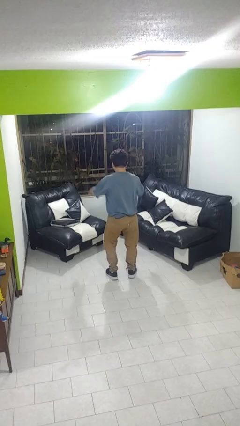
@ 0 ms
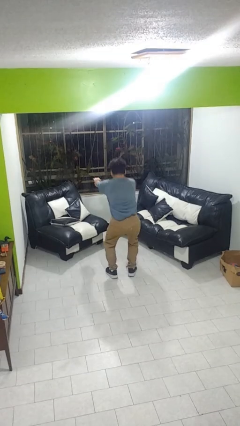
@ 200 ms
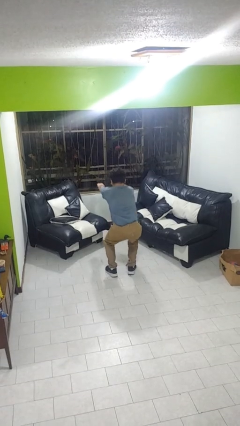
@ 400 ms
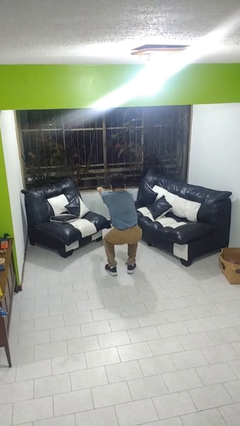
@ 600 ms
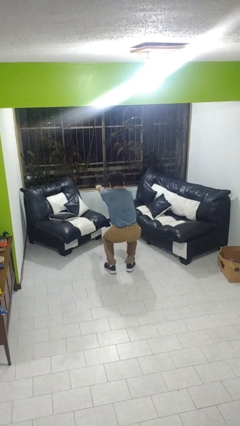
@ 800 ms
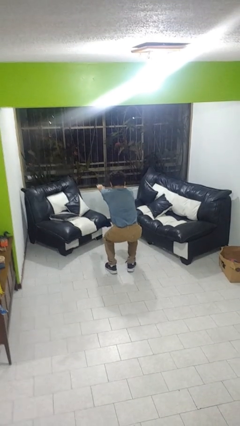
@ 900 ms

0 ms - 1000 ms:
person squats

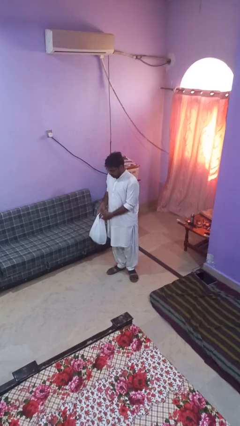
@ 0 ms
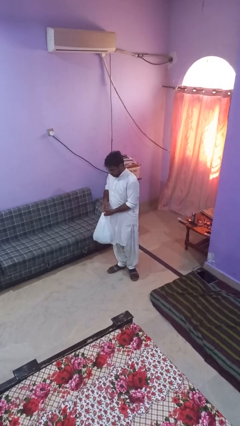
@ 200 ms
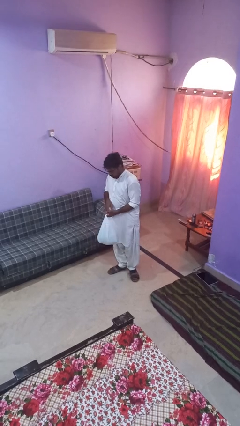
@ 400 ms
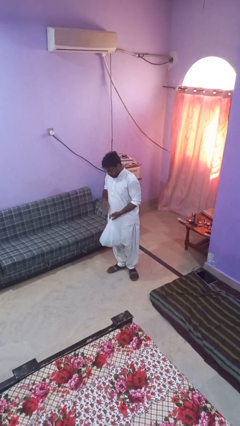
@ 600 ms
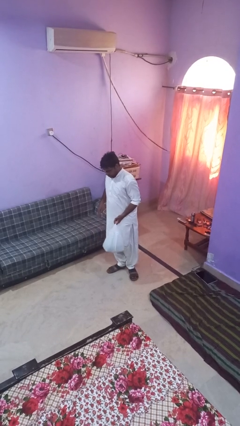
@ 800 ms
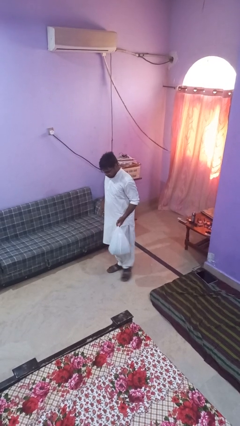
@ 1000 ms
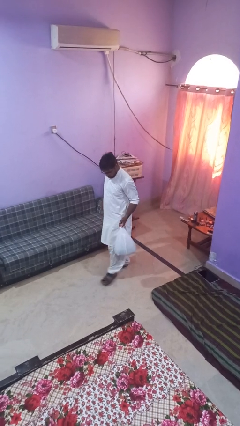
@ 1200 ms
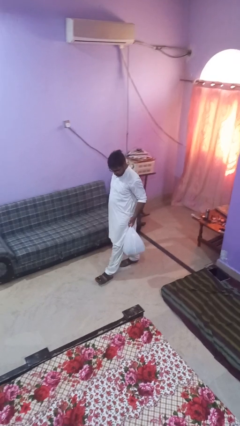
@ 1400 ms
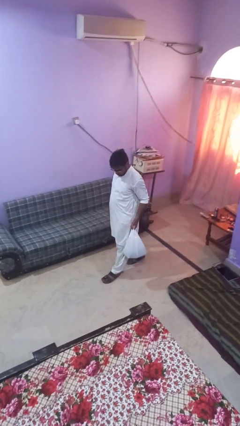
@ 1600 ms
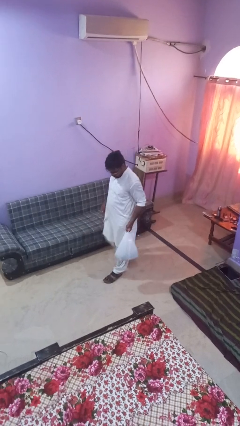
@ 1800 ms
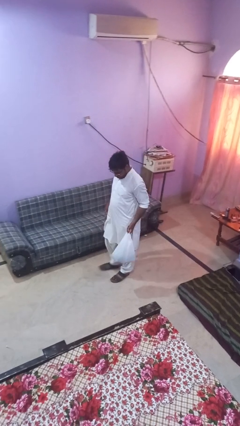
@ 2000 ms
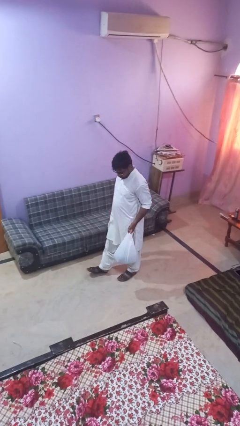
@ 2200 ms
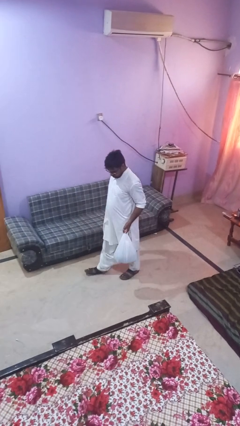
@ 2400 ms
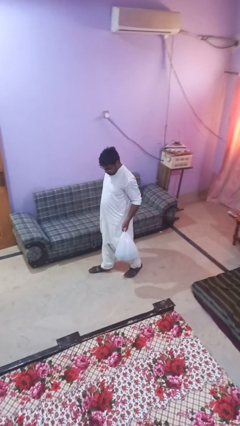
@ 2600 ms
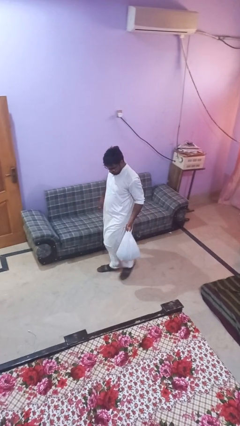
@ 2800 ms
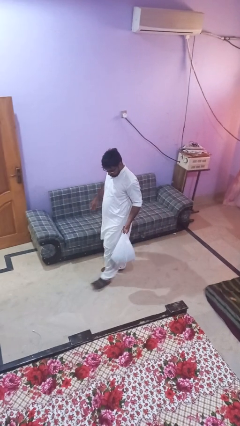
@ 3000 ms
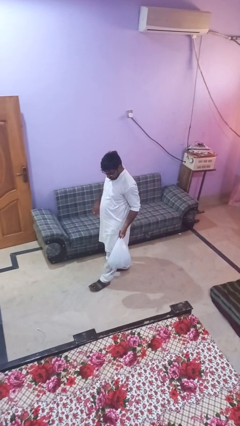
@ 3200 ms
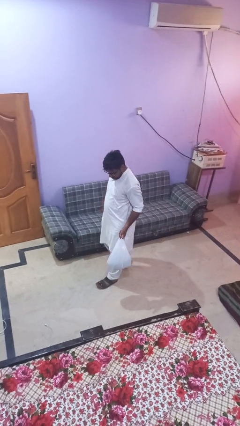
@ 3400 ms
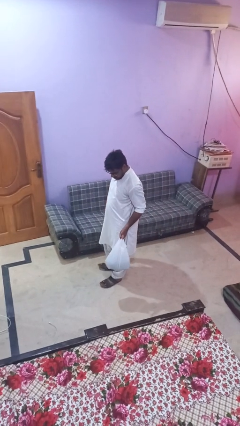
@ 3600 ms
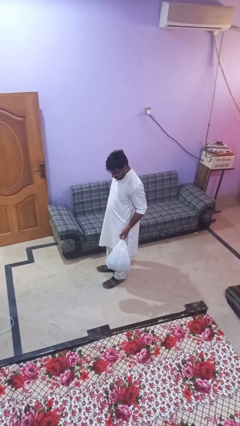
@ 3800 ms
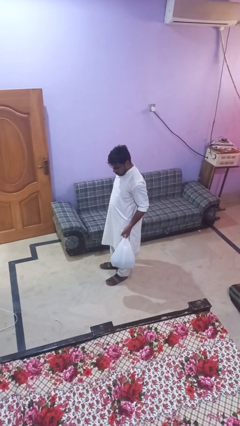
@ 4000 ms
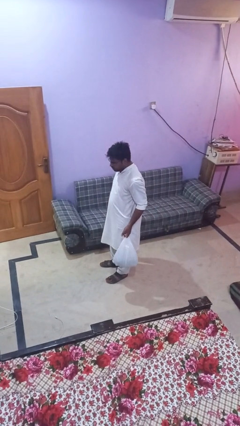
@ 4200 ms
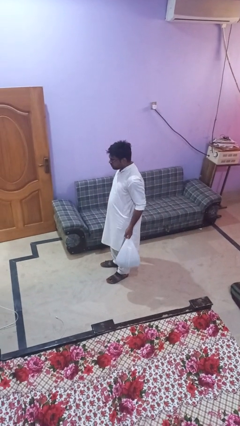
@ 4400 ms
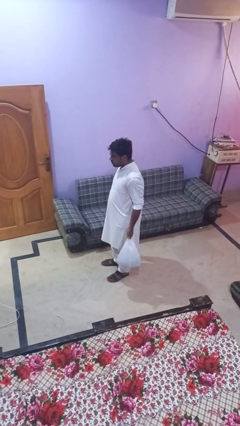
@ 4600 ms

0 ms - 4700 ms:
person carries groceries

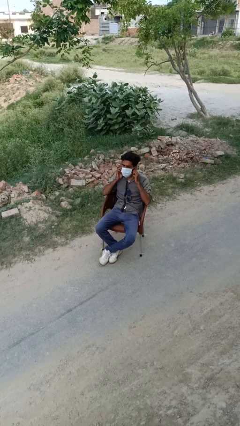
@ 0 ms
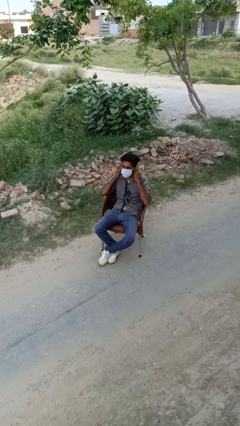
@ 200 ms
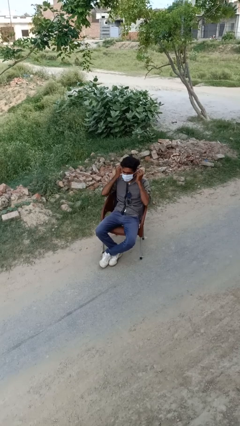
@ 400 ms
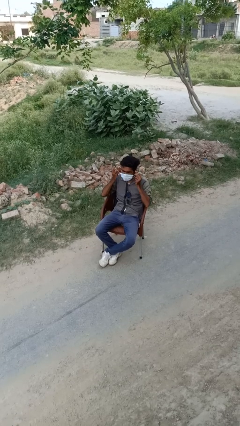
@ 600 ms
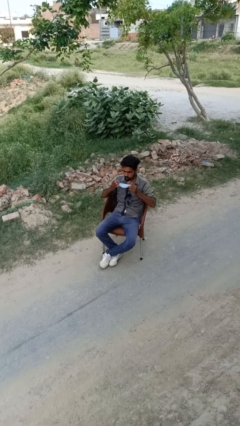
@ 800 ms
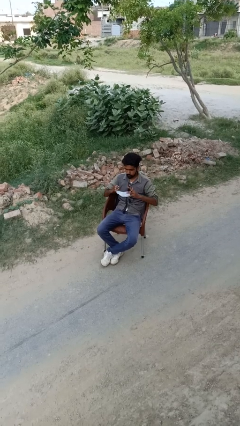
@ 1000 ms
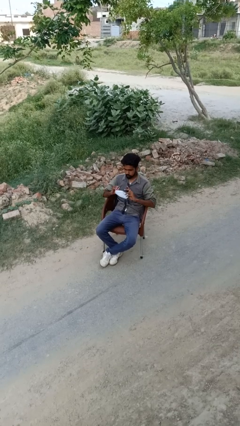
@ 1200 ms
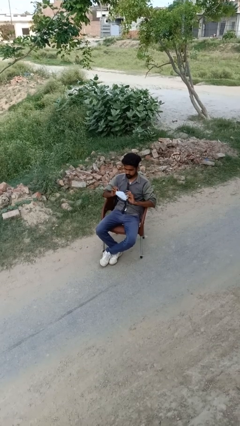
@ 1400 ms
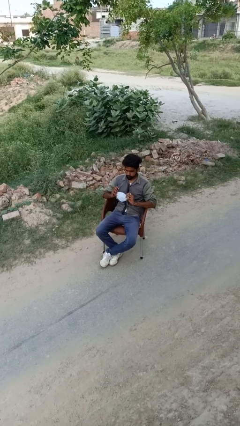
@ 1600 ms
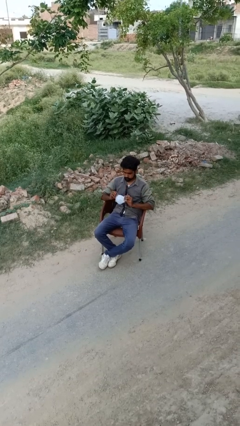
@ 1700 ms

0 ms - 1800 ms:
person takes off facemask

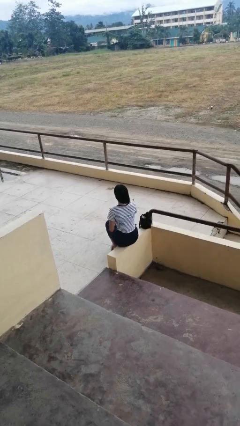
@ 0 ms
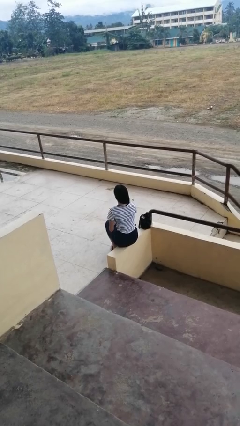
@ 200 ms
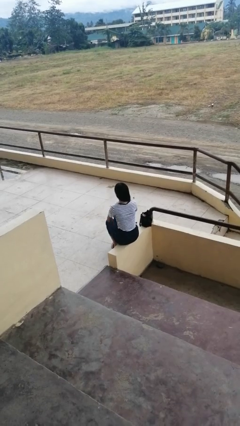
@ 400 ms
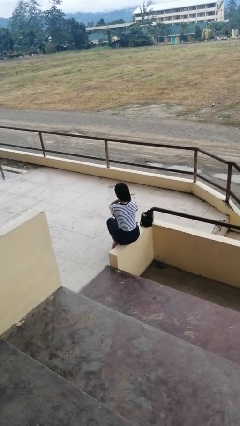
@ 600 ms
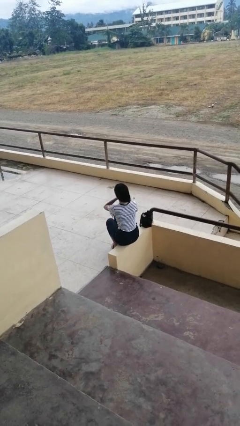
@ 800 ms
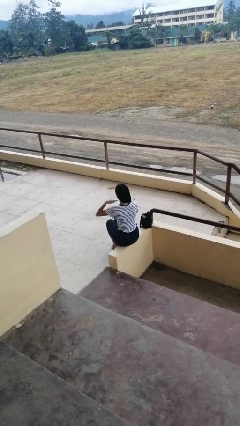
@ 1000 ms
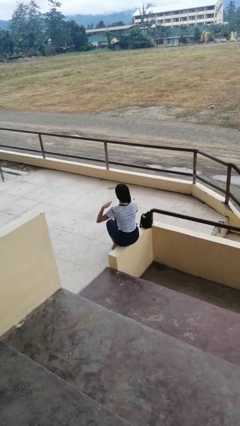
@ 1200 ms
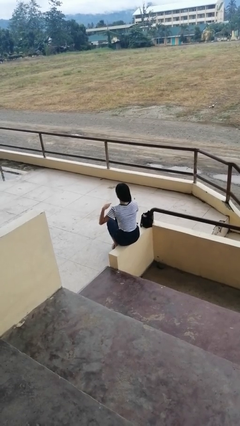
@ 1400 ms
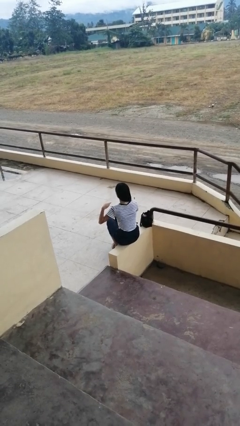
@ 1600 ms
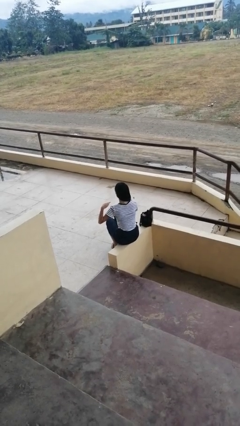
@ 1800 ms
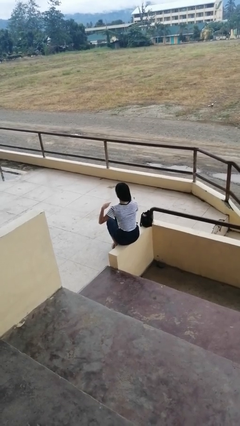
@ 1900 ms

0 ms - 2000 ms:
person gestures cut

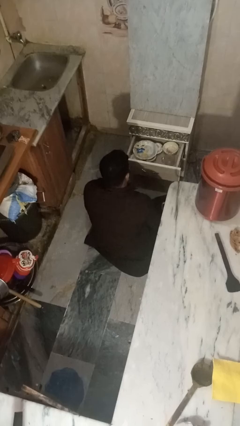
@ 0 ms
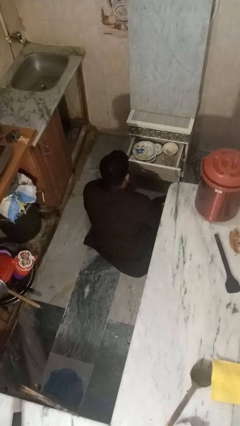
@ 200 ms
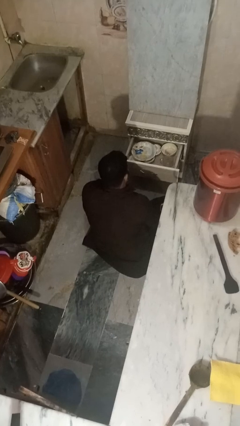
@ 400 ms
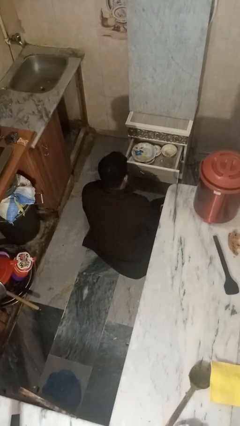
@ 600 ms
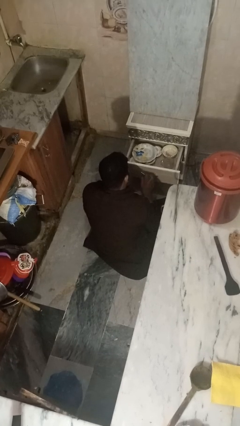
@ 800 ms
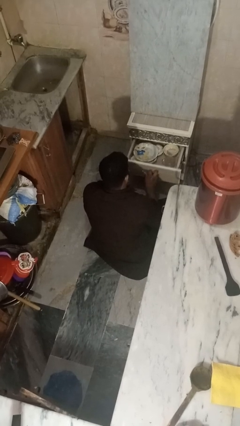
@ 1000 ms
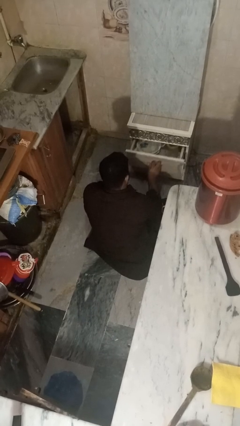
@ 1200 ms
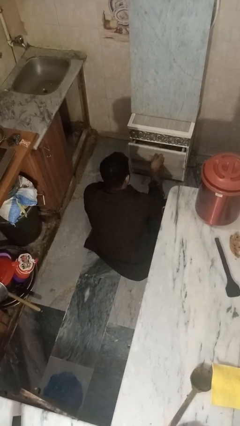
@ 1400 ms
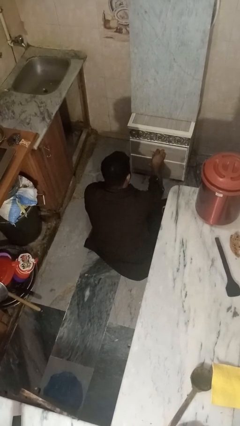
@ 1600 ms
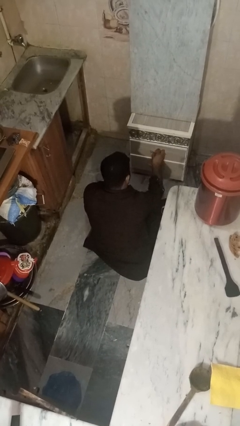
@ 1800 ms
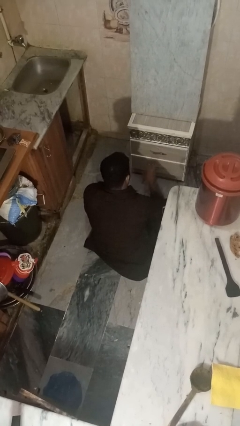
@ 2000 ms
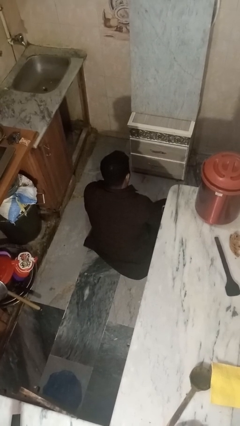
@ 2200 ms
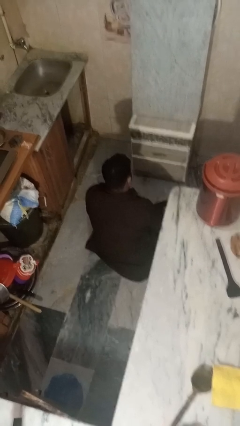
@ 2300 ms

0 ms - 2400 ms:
person closes kitchen drawer

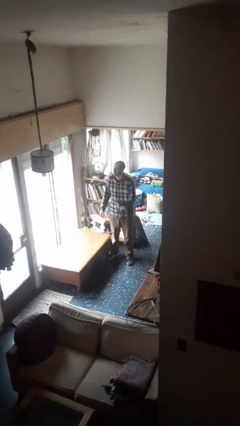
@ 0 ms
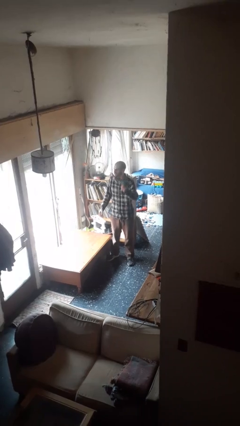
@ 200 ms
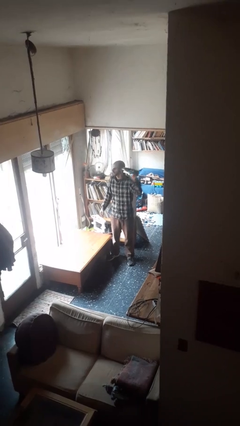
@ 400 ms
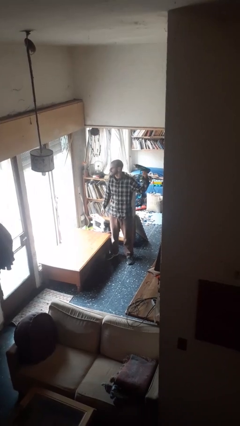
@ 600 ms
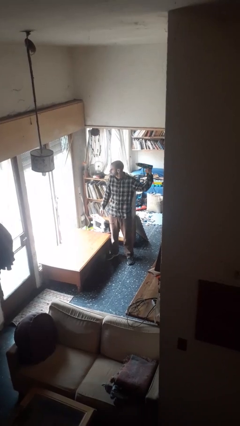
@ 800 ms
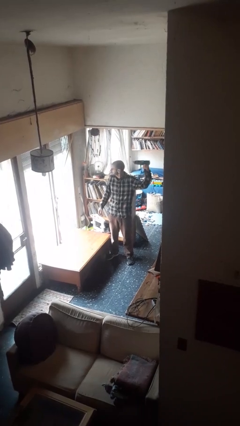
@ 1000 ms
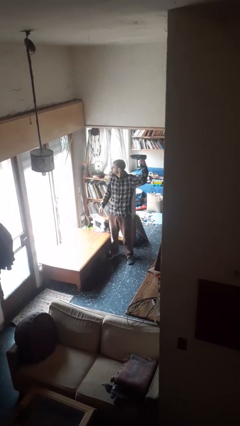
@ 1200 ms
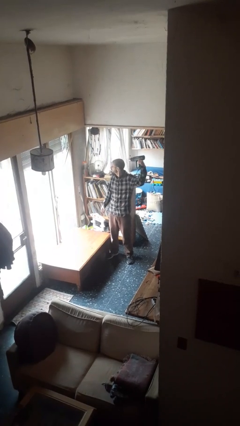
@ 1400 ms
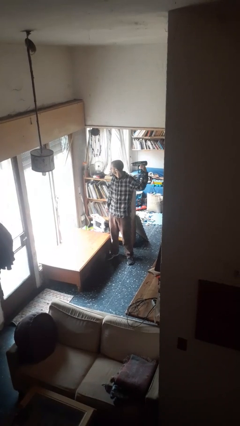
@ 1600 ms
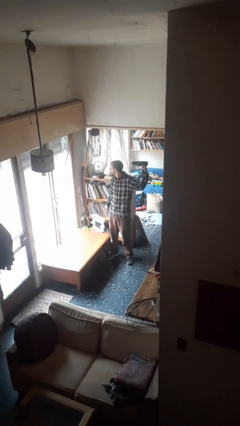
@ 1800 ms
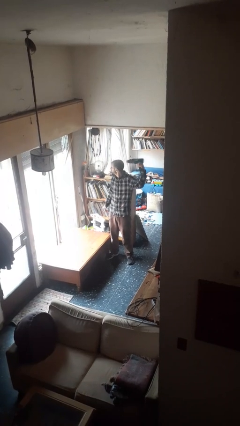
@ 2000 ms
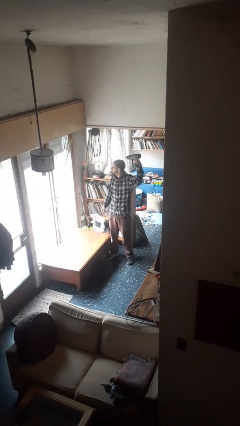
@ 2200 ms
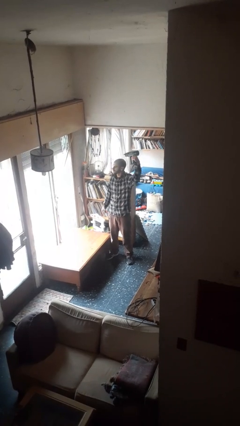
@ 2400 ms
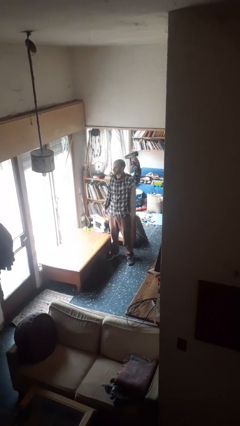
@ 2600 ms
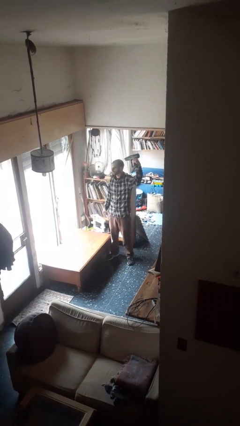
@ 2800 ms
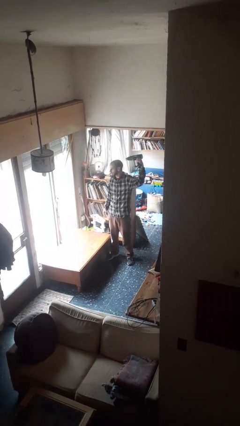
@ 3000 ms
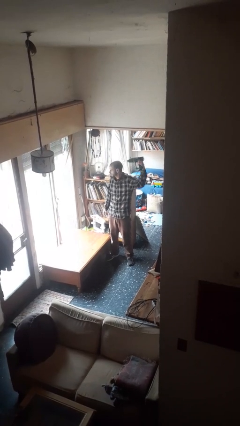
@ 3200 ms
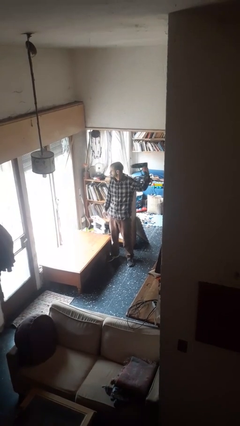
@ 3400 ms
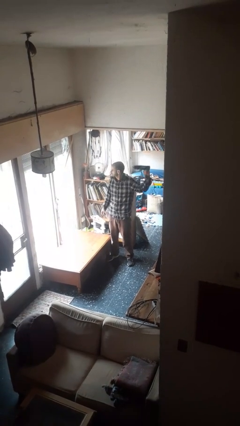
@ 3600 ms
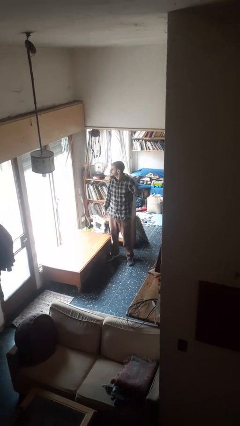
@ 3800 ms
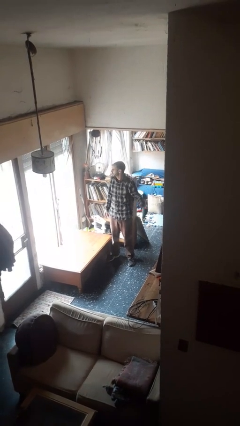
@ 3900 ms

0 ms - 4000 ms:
person dries hair with hairdryer

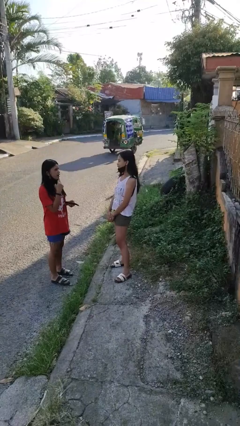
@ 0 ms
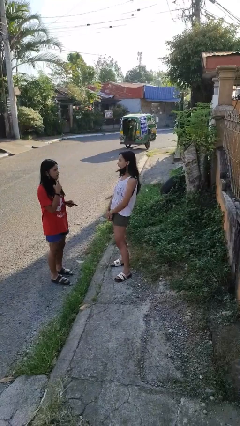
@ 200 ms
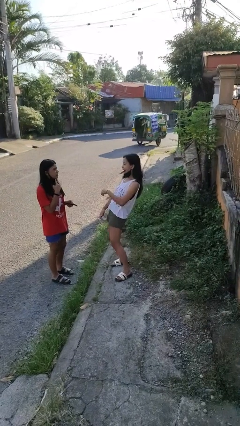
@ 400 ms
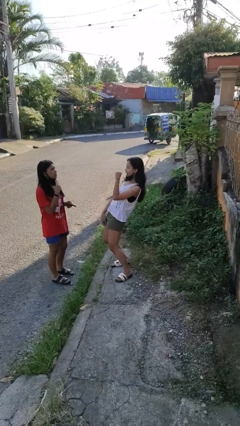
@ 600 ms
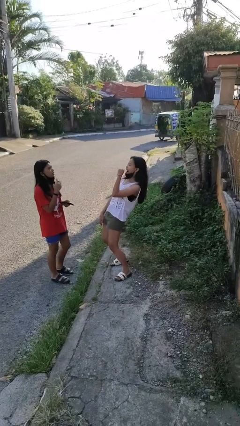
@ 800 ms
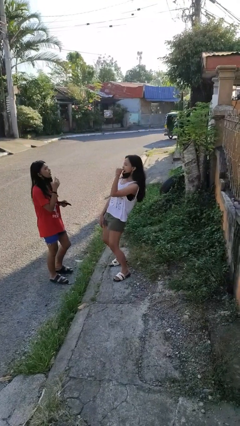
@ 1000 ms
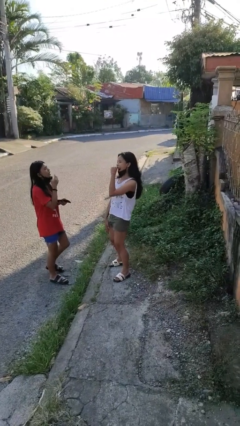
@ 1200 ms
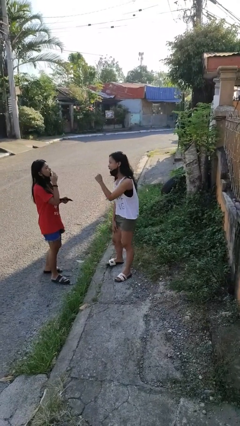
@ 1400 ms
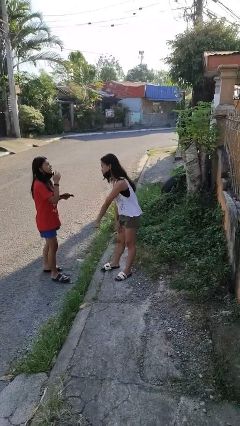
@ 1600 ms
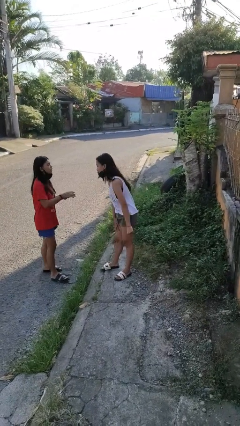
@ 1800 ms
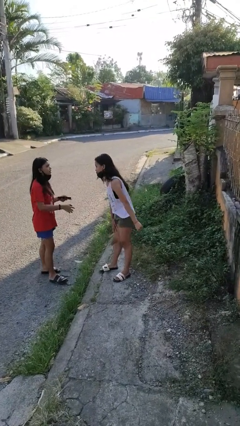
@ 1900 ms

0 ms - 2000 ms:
person laughs with person
